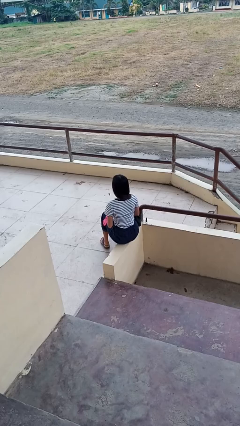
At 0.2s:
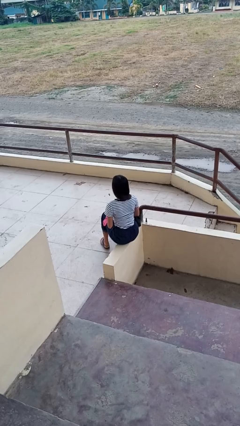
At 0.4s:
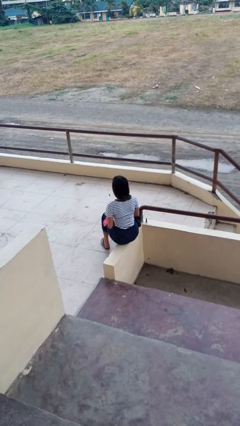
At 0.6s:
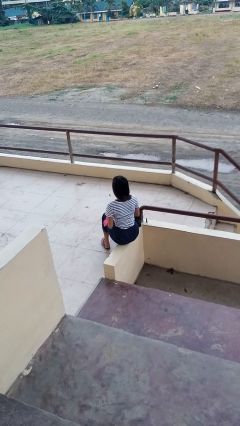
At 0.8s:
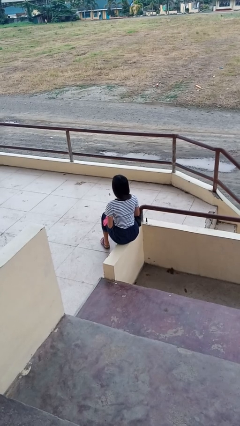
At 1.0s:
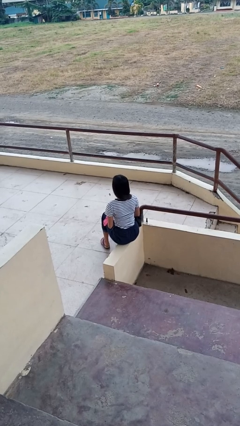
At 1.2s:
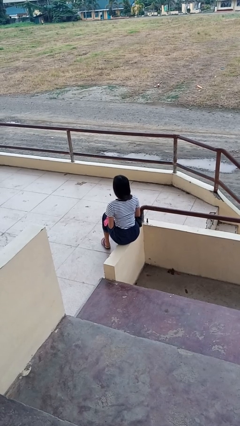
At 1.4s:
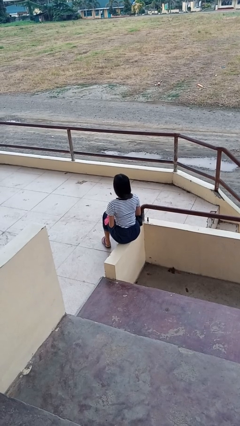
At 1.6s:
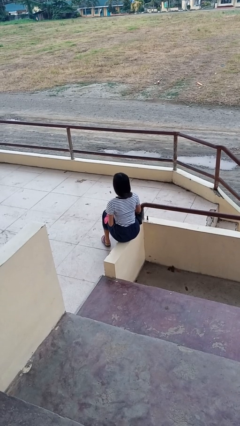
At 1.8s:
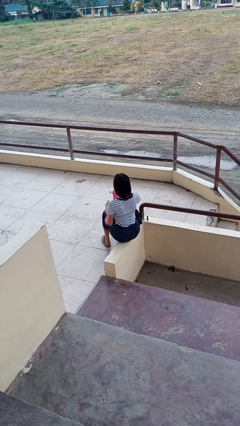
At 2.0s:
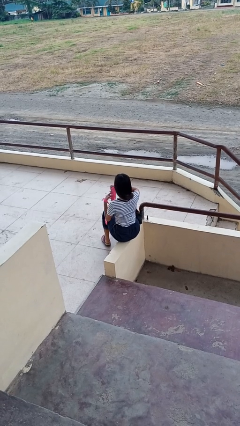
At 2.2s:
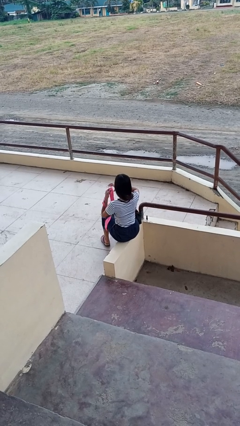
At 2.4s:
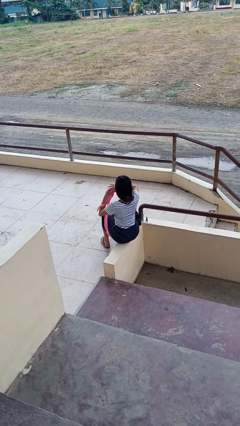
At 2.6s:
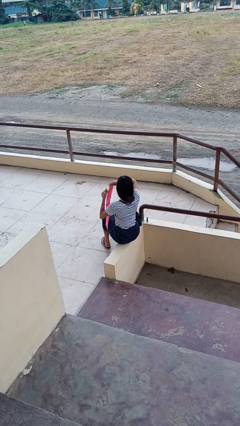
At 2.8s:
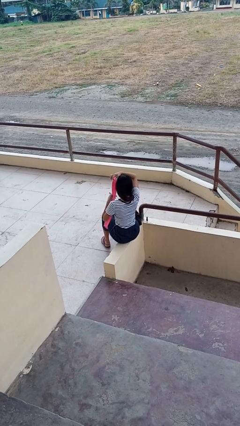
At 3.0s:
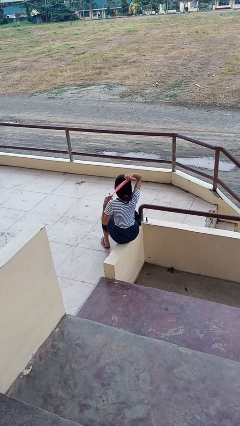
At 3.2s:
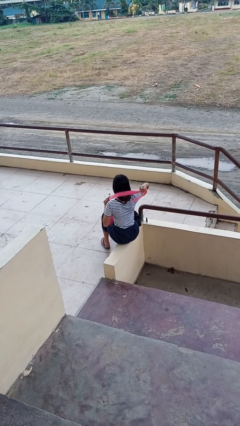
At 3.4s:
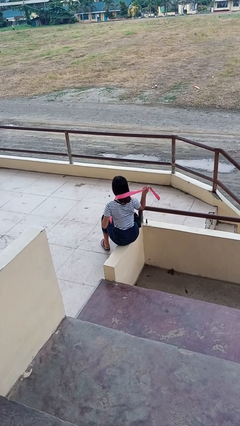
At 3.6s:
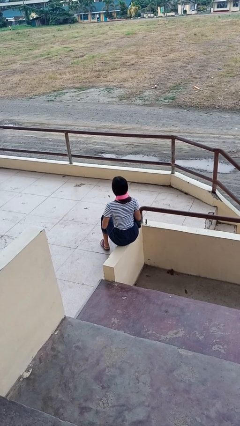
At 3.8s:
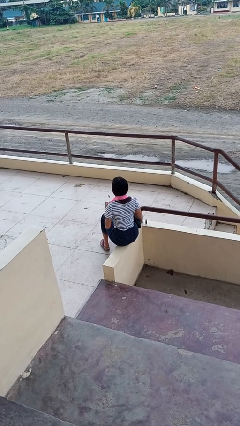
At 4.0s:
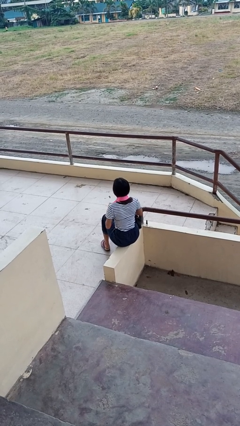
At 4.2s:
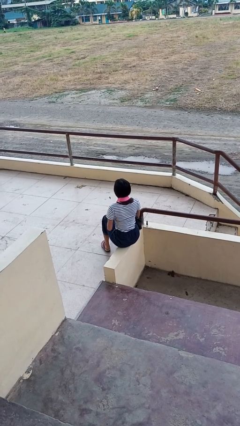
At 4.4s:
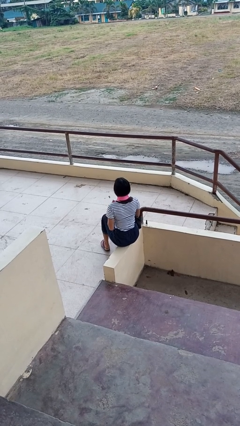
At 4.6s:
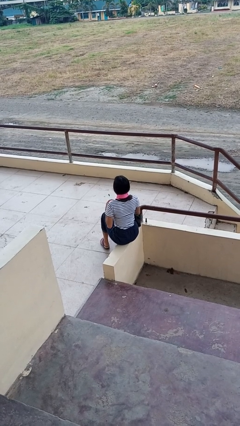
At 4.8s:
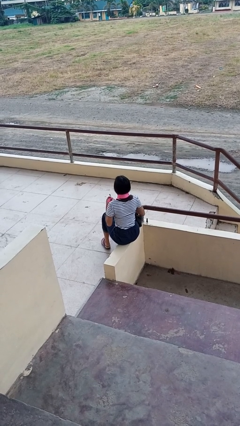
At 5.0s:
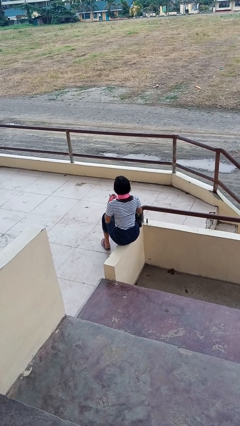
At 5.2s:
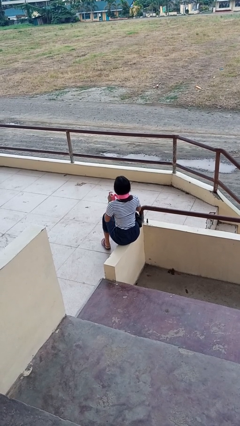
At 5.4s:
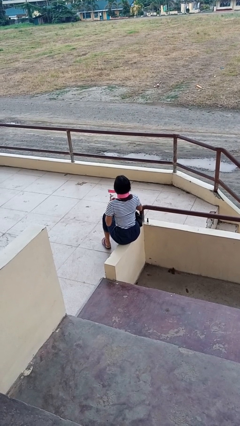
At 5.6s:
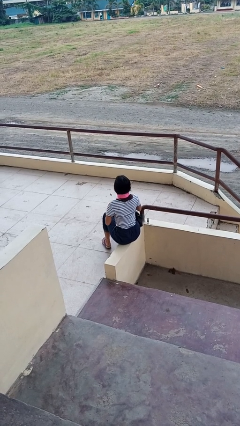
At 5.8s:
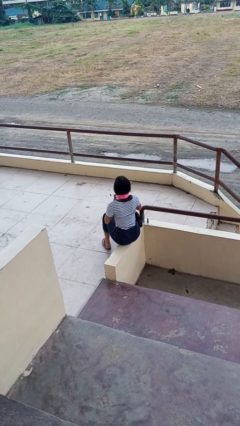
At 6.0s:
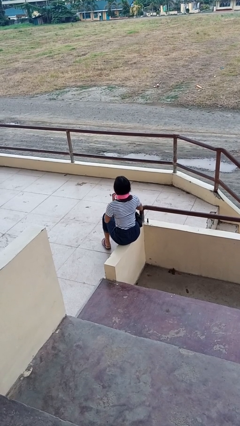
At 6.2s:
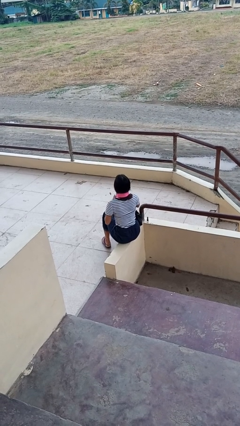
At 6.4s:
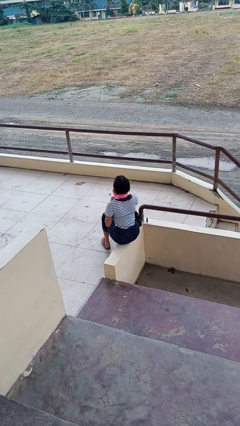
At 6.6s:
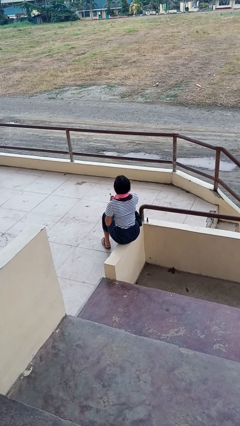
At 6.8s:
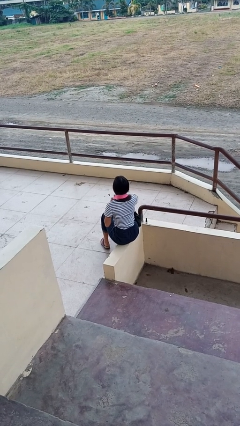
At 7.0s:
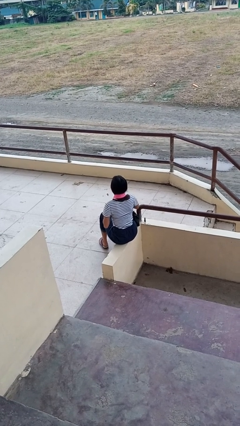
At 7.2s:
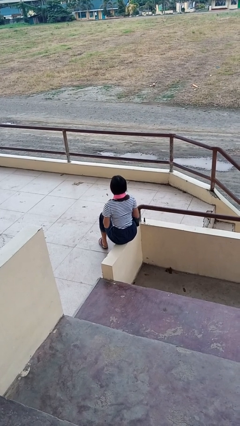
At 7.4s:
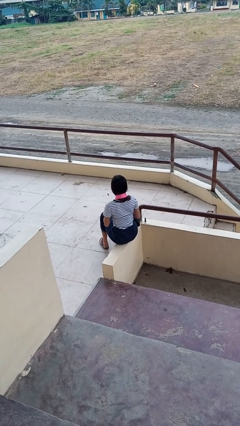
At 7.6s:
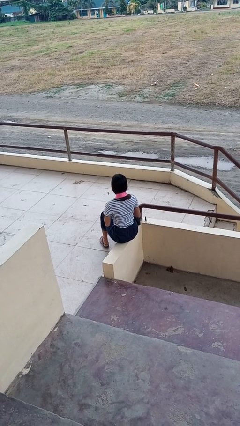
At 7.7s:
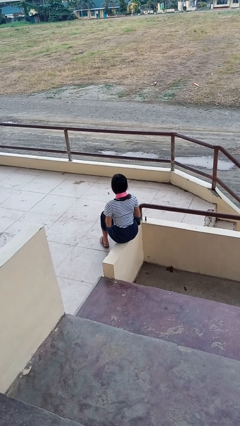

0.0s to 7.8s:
person puts on necktie

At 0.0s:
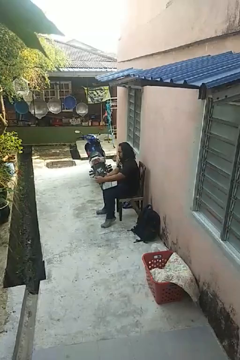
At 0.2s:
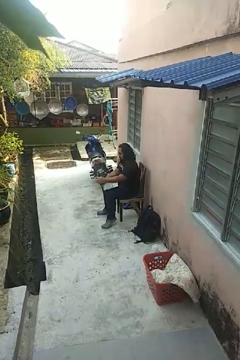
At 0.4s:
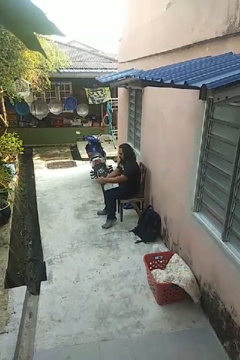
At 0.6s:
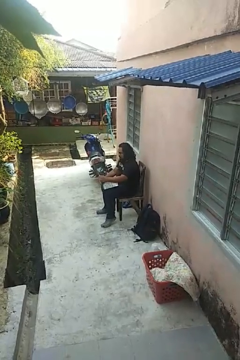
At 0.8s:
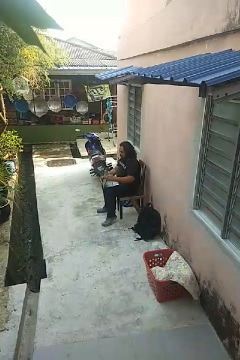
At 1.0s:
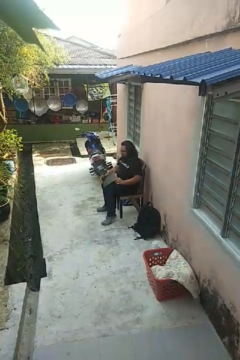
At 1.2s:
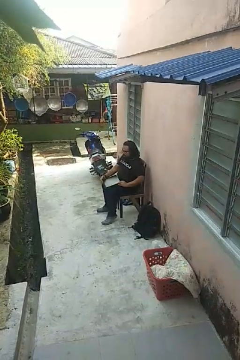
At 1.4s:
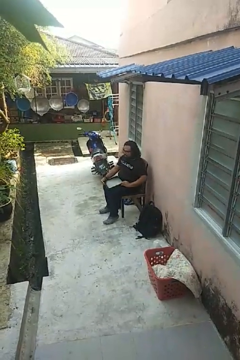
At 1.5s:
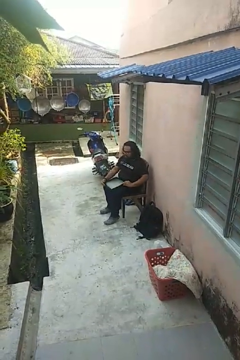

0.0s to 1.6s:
person closes laptop

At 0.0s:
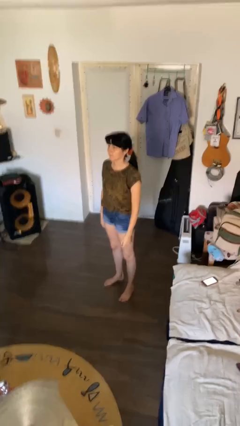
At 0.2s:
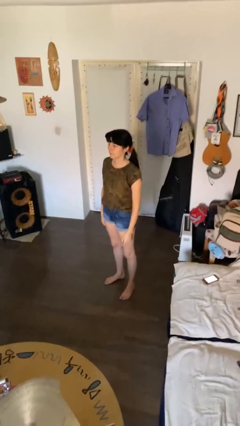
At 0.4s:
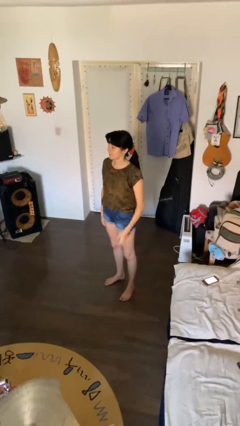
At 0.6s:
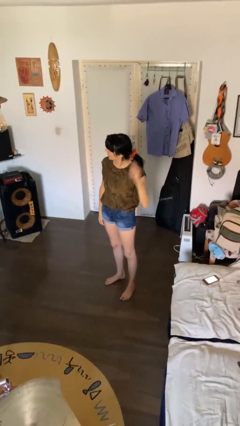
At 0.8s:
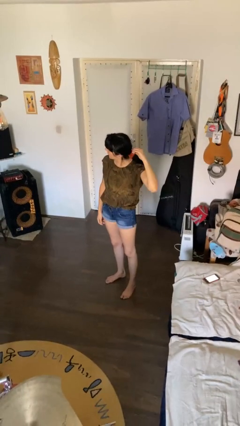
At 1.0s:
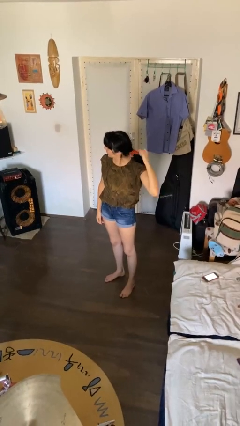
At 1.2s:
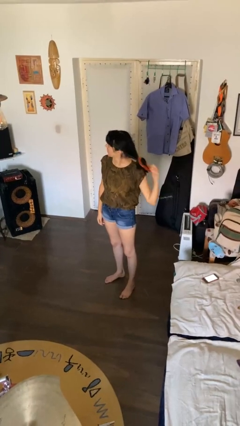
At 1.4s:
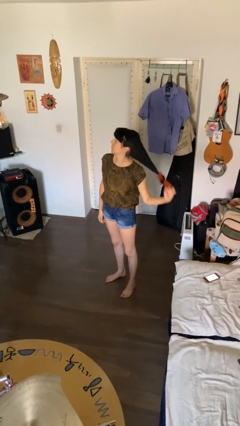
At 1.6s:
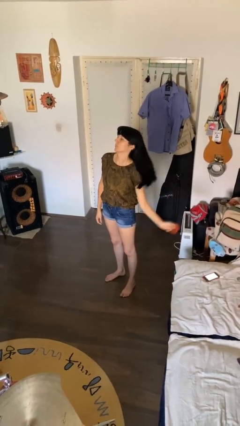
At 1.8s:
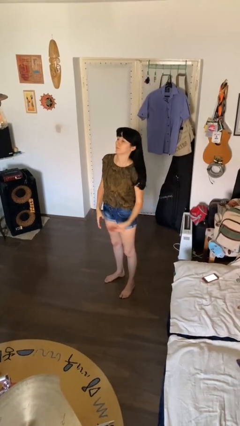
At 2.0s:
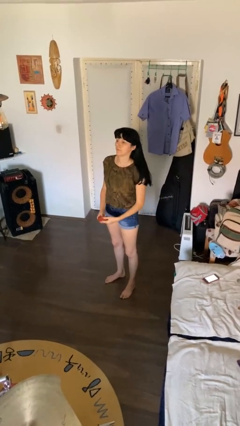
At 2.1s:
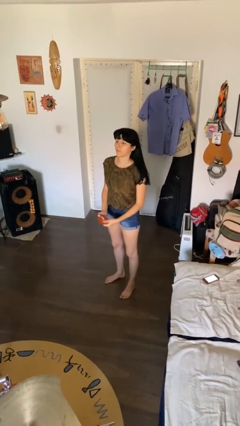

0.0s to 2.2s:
person takes off hairtie

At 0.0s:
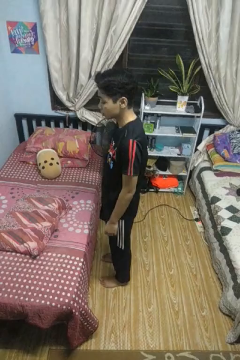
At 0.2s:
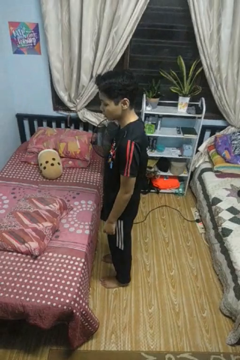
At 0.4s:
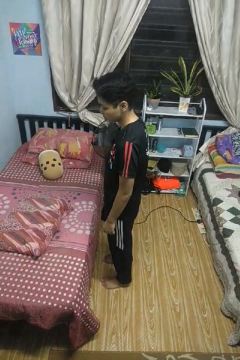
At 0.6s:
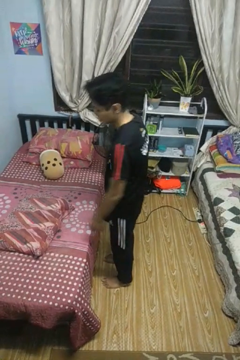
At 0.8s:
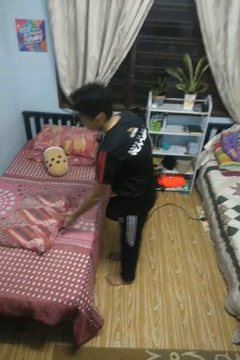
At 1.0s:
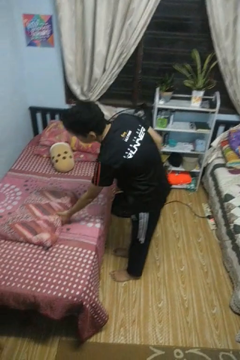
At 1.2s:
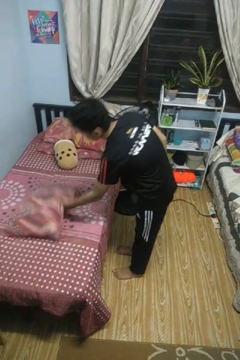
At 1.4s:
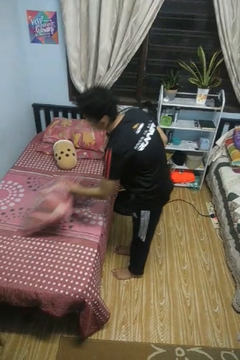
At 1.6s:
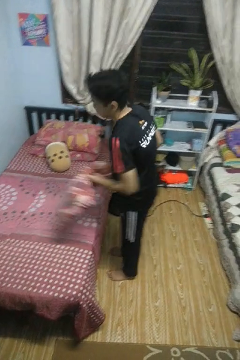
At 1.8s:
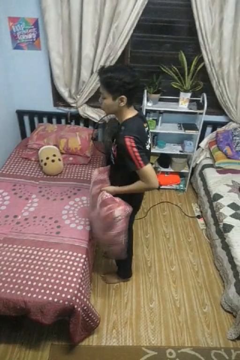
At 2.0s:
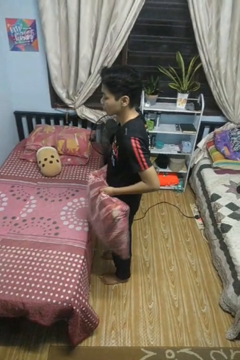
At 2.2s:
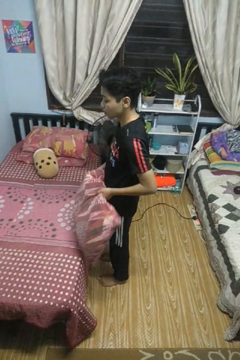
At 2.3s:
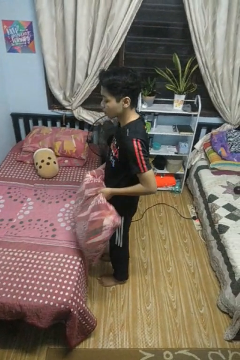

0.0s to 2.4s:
person picks up object from bed

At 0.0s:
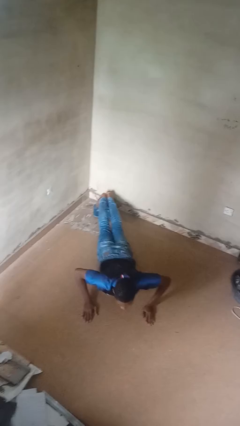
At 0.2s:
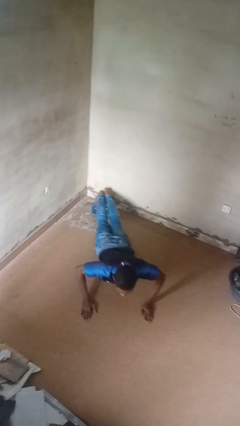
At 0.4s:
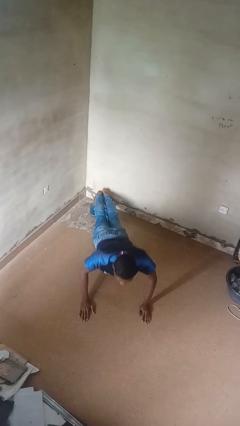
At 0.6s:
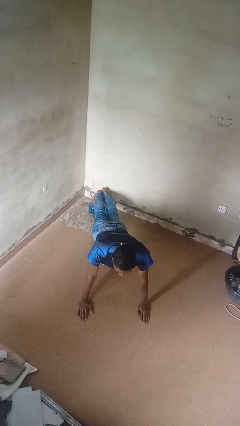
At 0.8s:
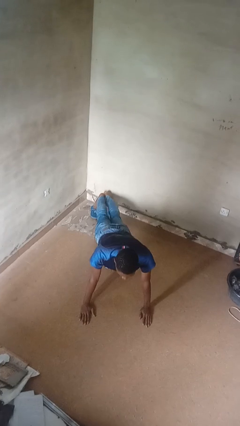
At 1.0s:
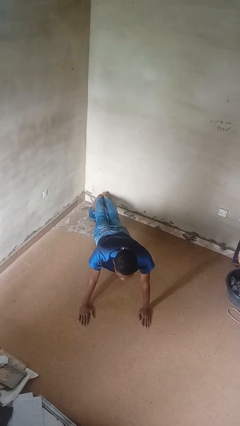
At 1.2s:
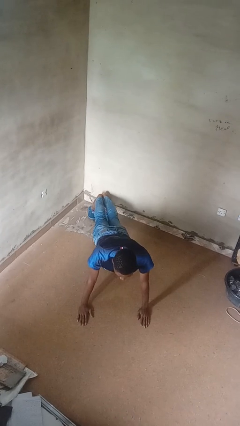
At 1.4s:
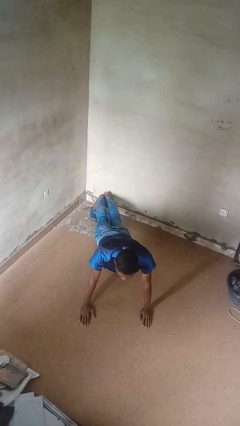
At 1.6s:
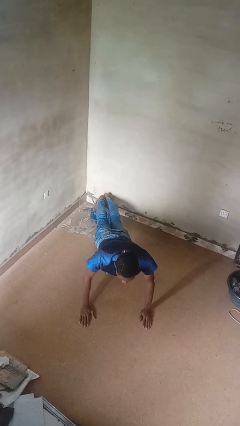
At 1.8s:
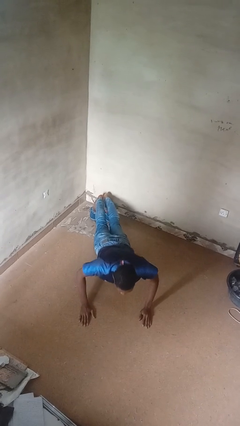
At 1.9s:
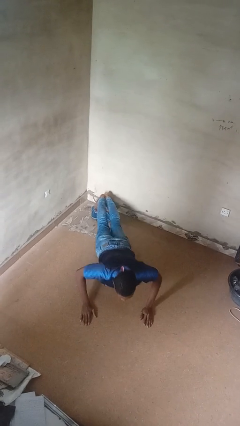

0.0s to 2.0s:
person exercises with pushup

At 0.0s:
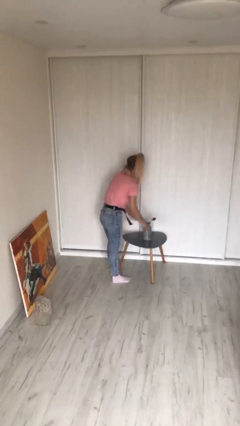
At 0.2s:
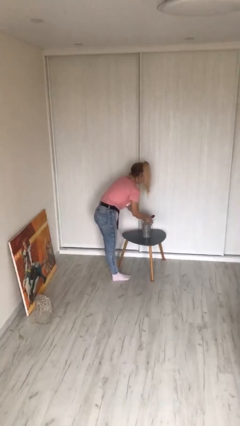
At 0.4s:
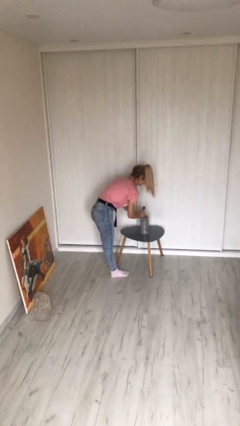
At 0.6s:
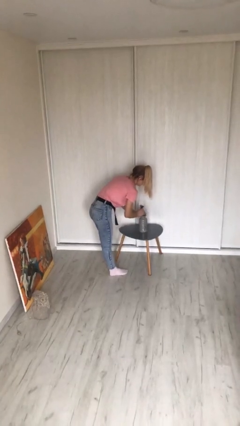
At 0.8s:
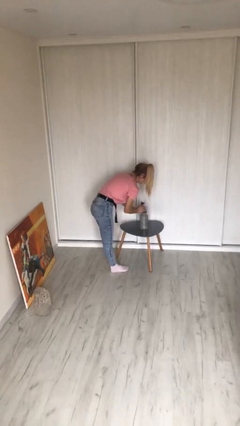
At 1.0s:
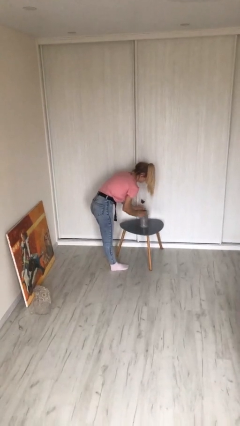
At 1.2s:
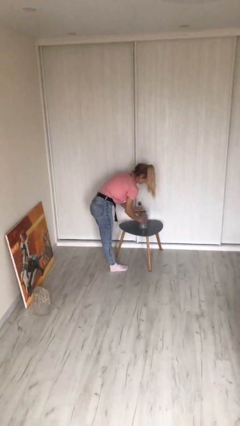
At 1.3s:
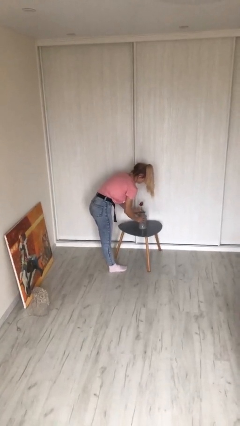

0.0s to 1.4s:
person arranges flowers in vase

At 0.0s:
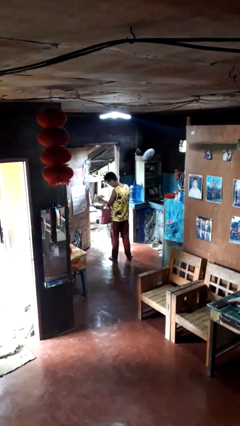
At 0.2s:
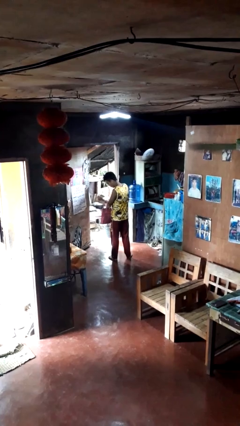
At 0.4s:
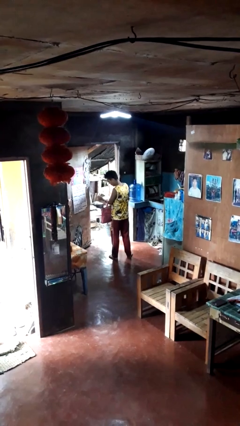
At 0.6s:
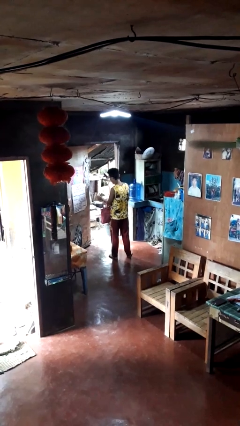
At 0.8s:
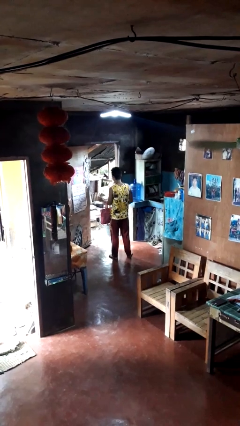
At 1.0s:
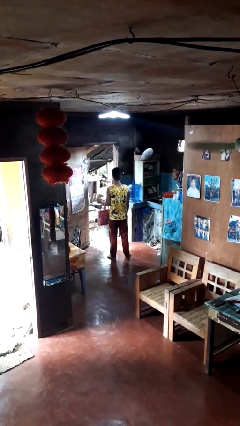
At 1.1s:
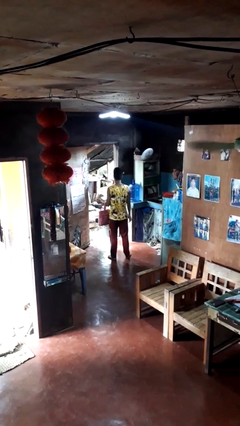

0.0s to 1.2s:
person puts object into purse
